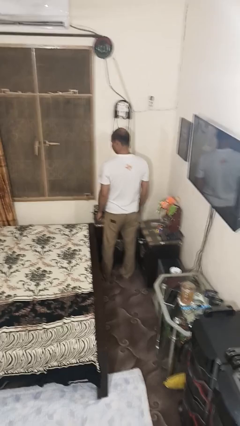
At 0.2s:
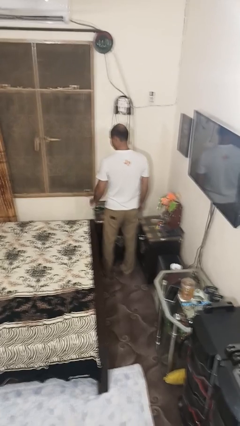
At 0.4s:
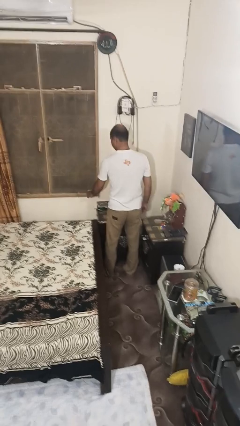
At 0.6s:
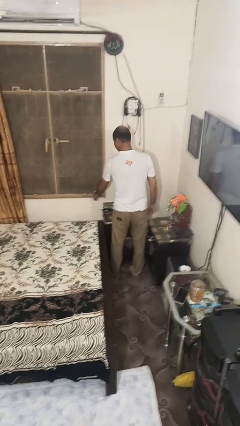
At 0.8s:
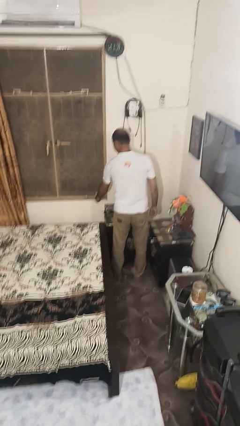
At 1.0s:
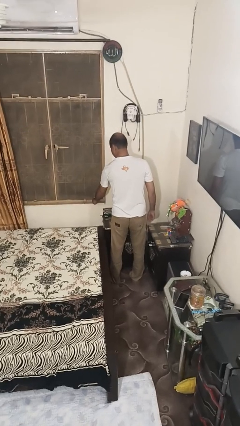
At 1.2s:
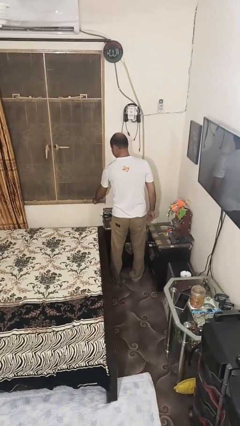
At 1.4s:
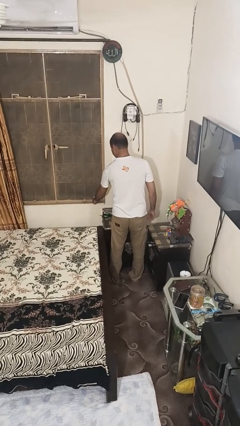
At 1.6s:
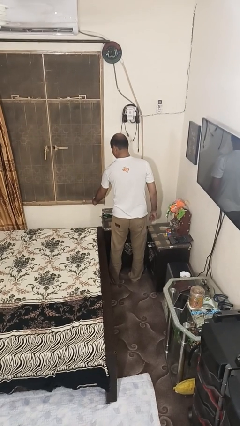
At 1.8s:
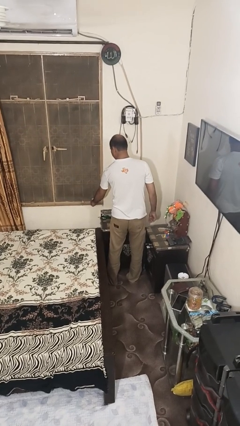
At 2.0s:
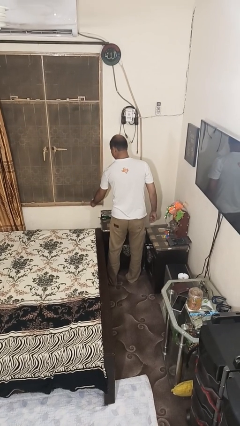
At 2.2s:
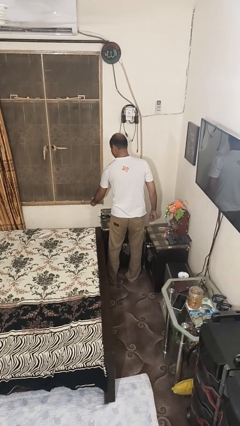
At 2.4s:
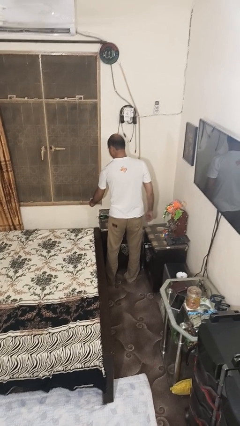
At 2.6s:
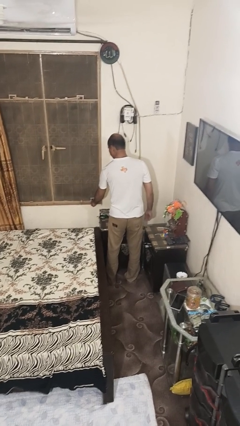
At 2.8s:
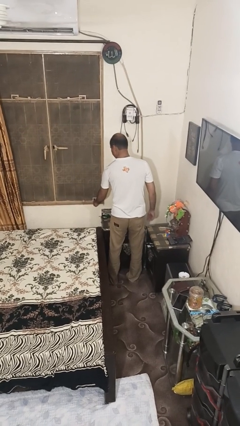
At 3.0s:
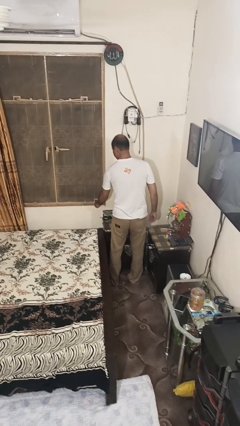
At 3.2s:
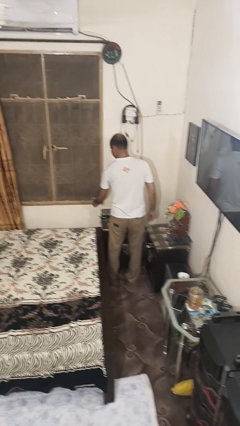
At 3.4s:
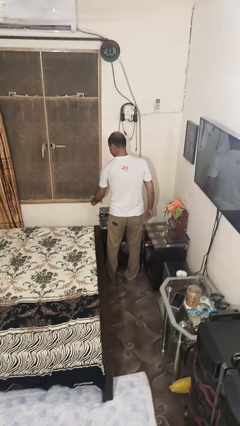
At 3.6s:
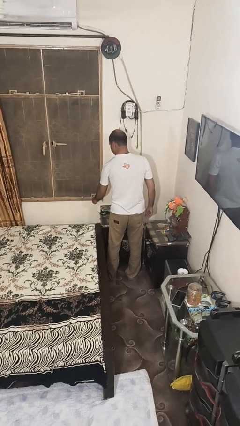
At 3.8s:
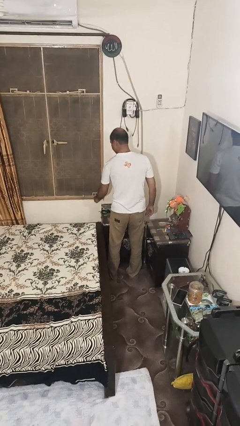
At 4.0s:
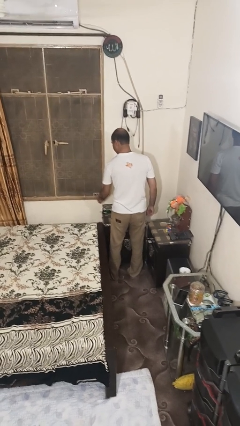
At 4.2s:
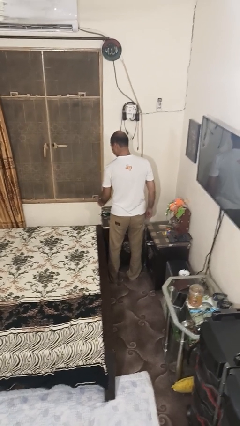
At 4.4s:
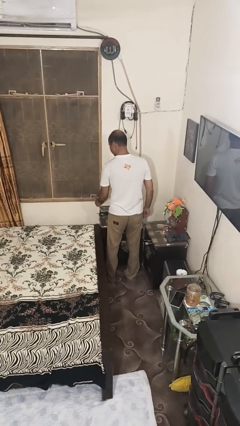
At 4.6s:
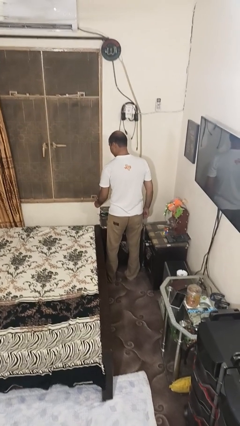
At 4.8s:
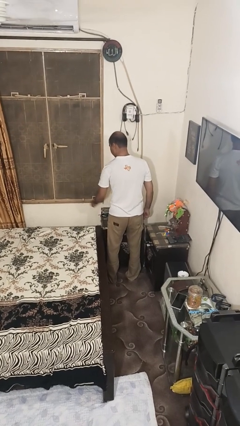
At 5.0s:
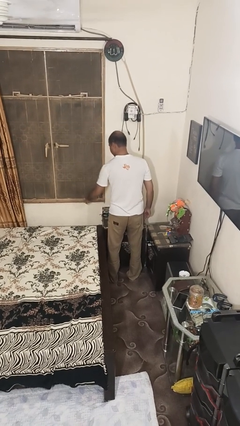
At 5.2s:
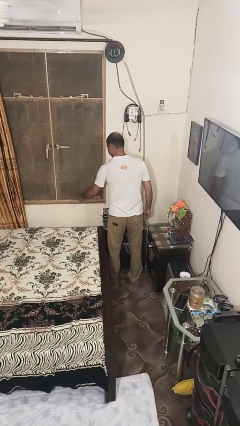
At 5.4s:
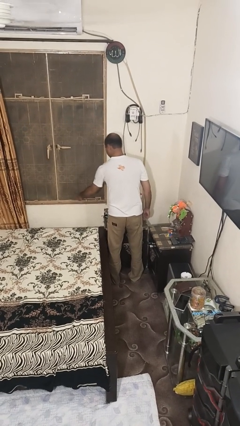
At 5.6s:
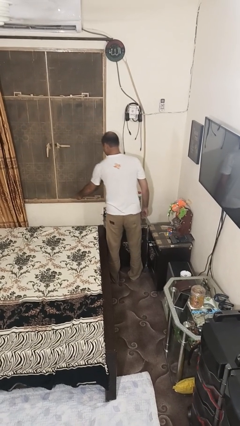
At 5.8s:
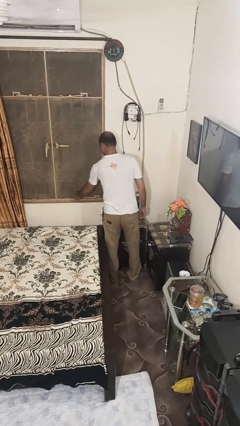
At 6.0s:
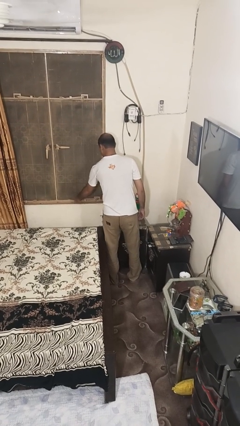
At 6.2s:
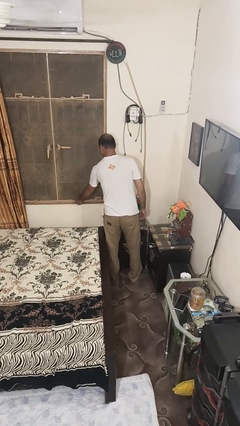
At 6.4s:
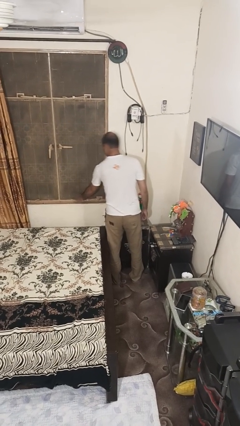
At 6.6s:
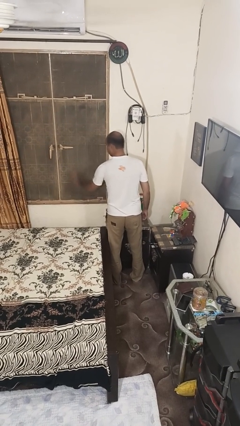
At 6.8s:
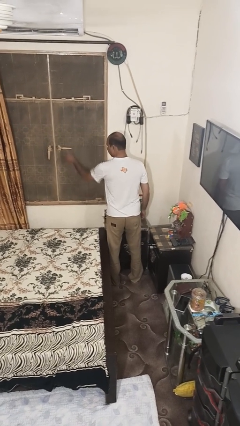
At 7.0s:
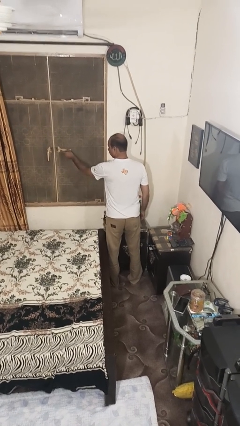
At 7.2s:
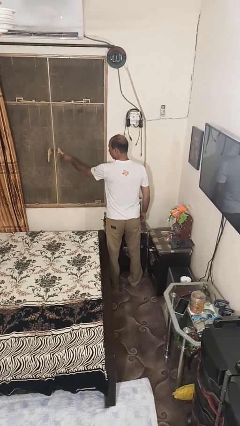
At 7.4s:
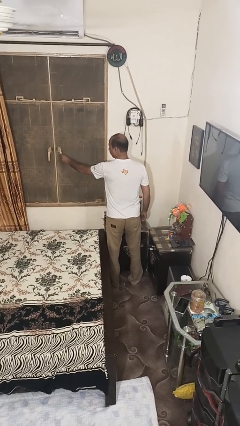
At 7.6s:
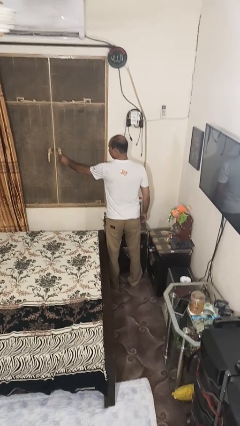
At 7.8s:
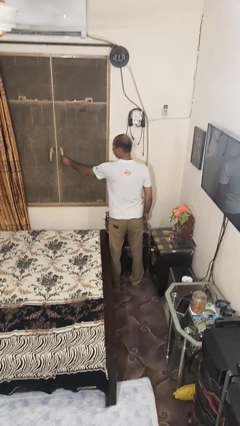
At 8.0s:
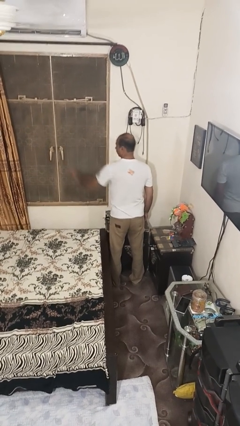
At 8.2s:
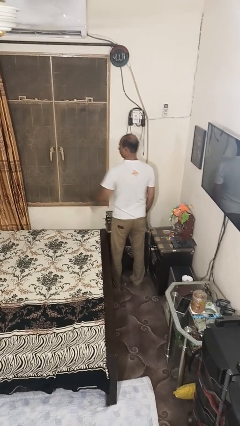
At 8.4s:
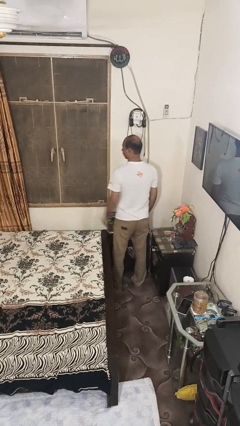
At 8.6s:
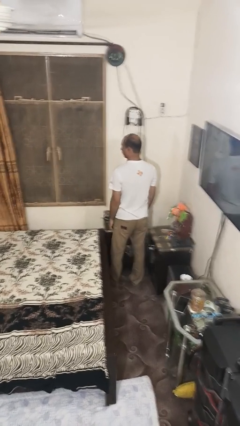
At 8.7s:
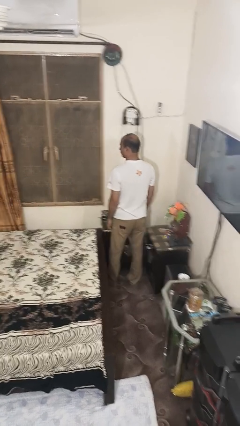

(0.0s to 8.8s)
person closes home window

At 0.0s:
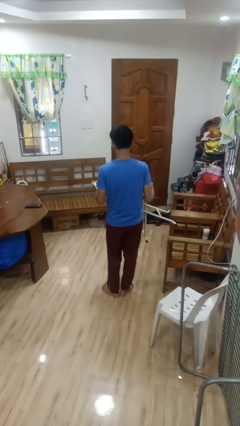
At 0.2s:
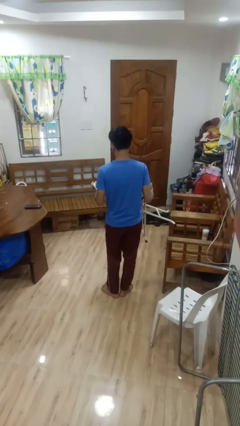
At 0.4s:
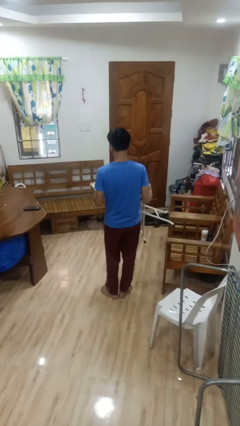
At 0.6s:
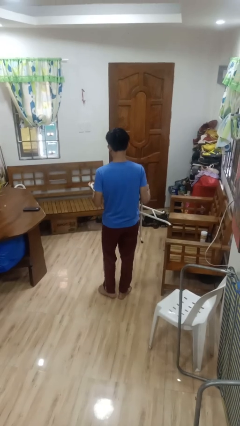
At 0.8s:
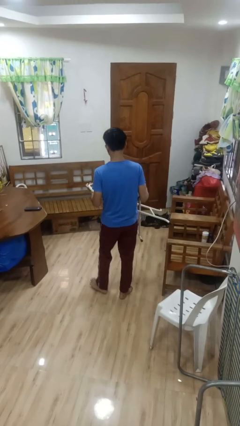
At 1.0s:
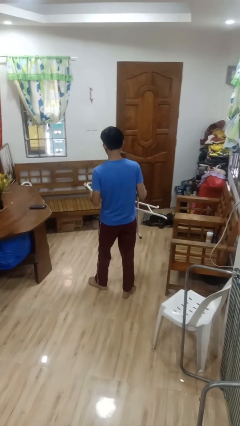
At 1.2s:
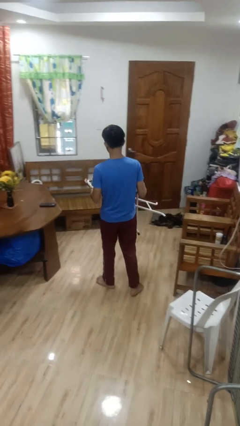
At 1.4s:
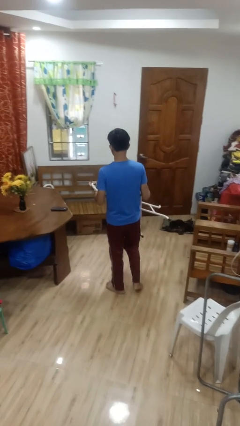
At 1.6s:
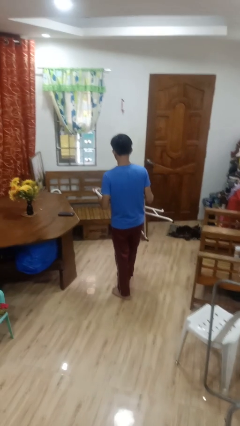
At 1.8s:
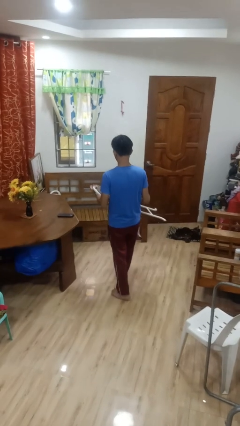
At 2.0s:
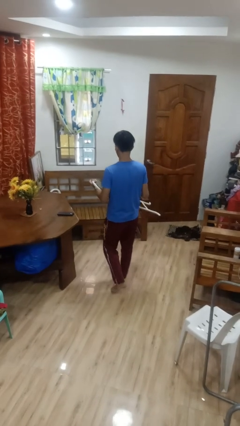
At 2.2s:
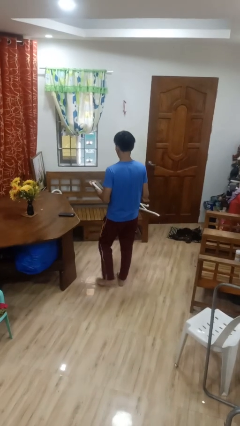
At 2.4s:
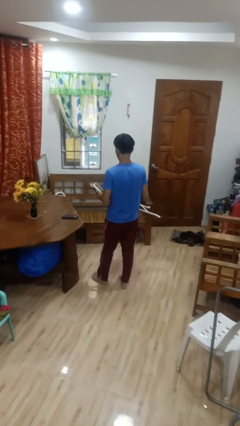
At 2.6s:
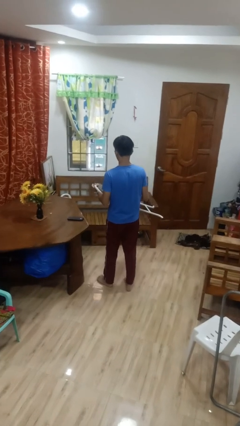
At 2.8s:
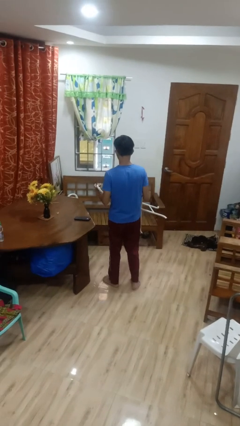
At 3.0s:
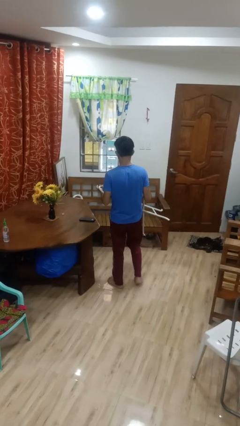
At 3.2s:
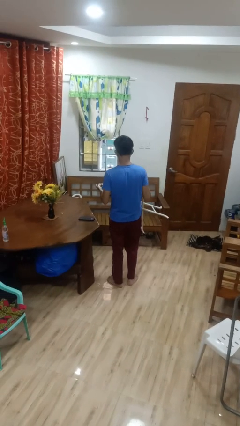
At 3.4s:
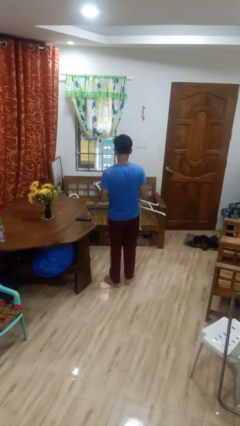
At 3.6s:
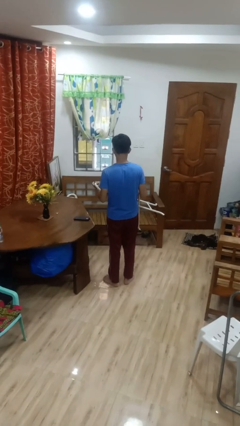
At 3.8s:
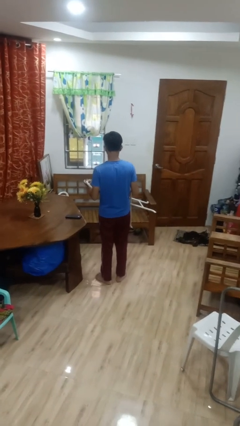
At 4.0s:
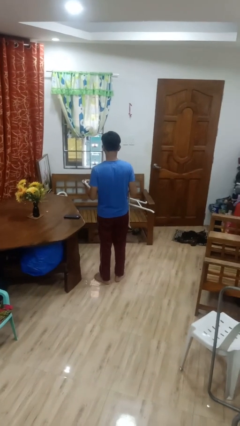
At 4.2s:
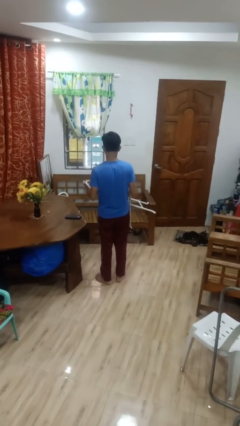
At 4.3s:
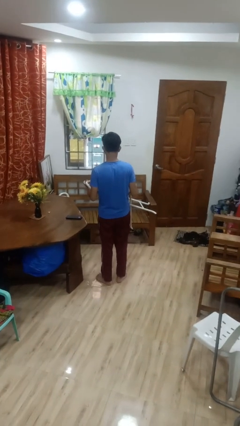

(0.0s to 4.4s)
person carries furniture

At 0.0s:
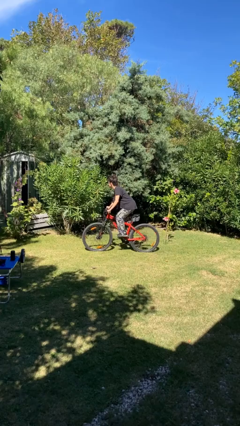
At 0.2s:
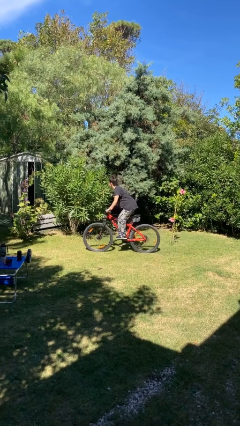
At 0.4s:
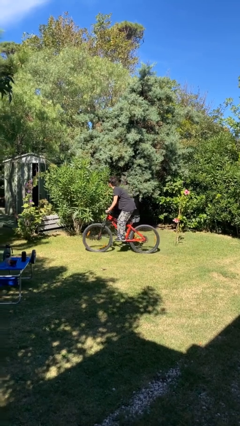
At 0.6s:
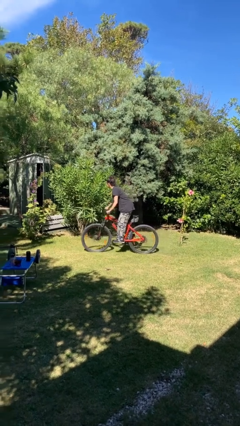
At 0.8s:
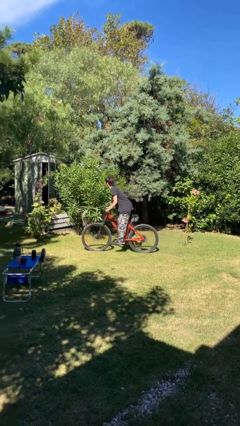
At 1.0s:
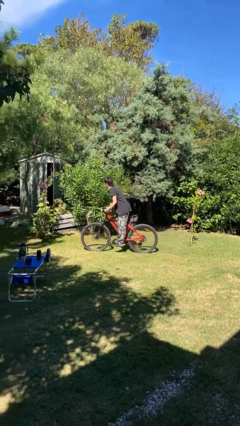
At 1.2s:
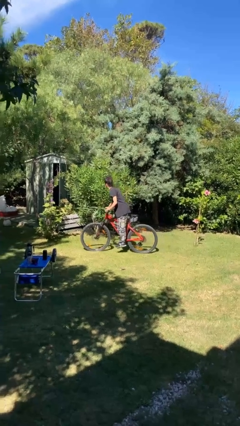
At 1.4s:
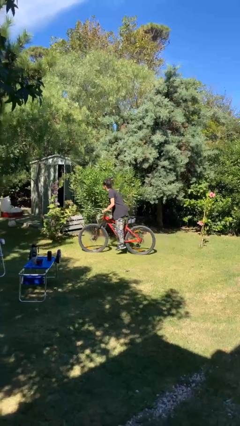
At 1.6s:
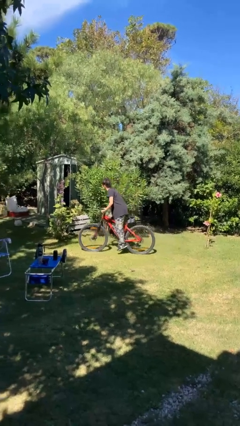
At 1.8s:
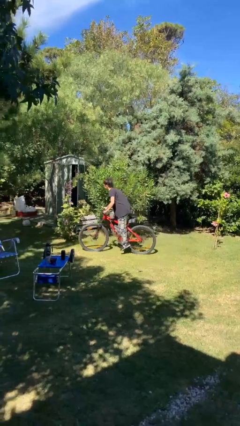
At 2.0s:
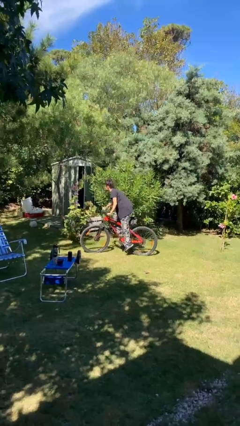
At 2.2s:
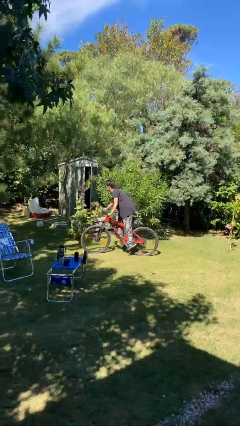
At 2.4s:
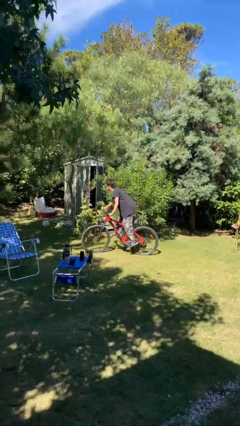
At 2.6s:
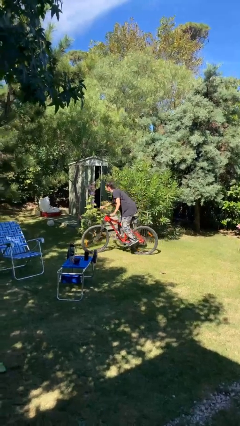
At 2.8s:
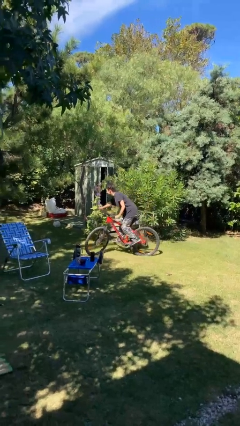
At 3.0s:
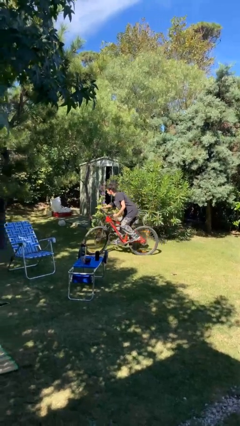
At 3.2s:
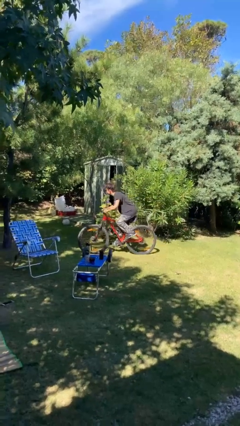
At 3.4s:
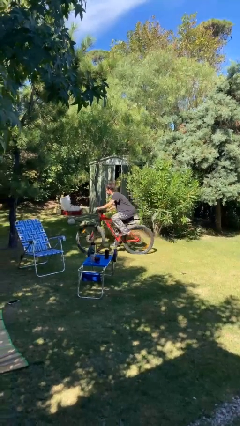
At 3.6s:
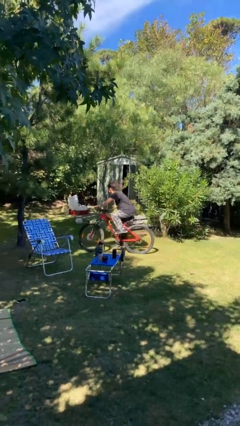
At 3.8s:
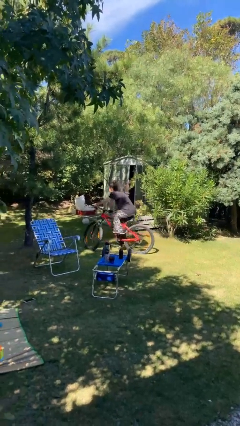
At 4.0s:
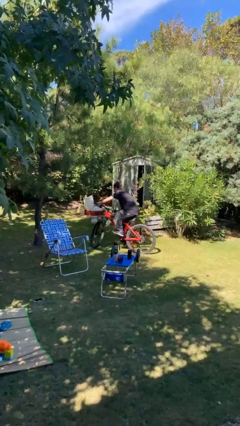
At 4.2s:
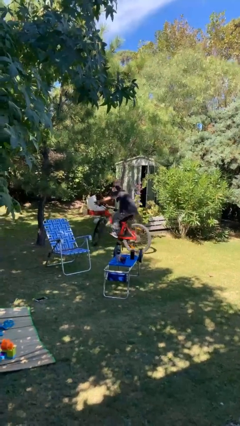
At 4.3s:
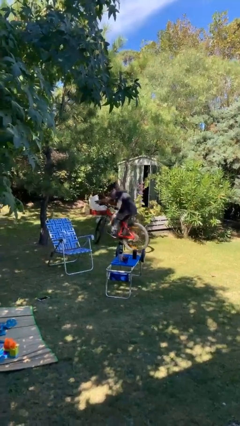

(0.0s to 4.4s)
person rides bicycle
